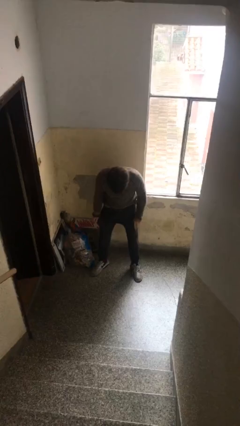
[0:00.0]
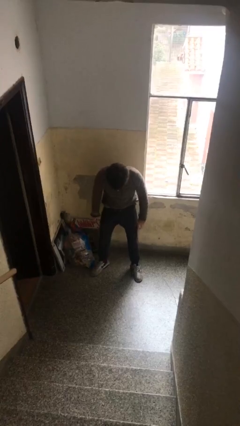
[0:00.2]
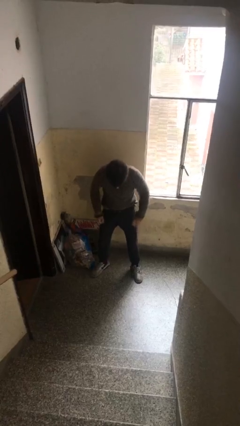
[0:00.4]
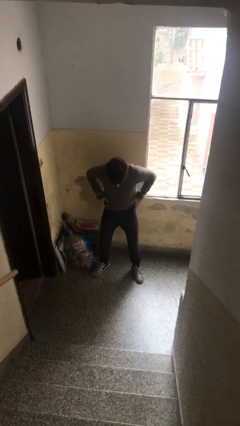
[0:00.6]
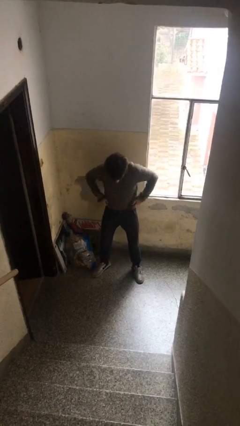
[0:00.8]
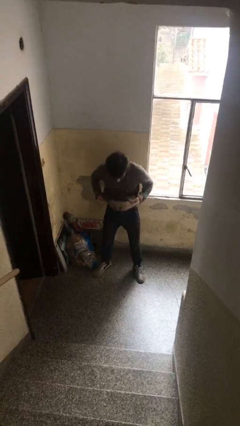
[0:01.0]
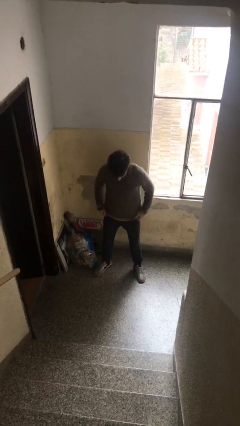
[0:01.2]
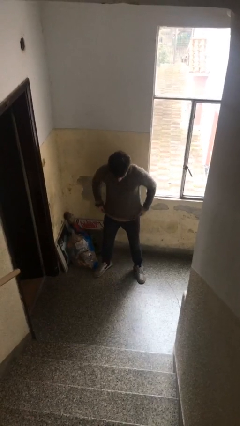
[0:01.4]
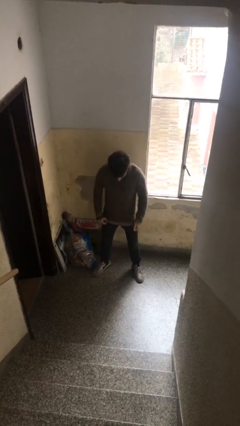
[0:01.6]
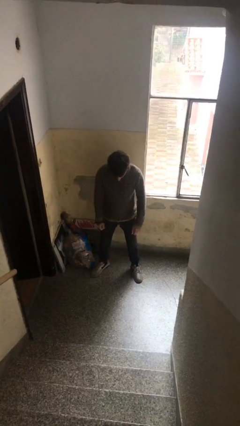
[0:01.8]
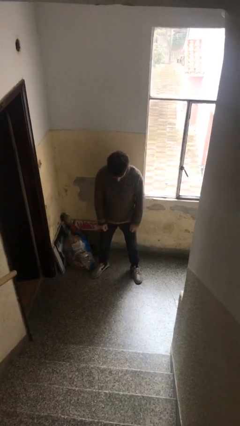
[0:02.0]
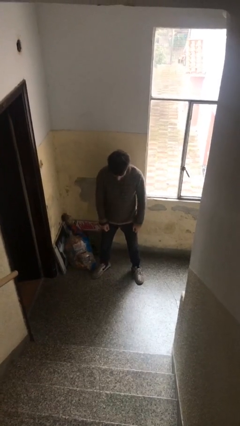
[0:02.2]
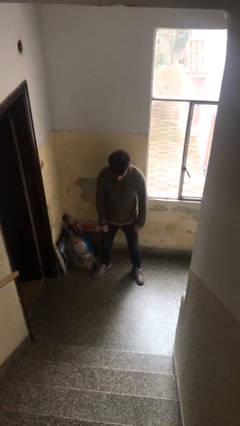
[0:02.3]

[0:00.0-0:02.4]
person untucks shirt

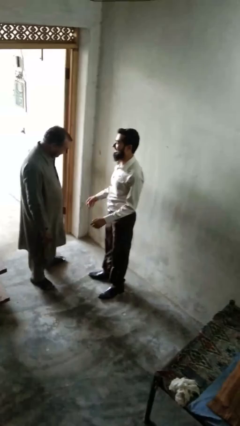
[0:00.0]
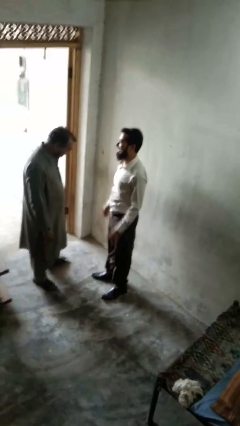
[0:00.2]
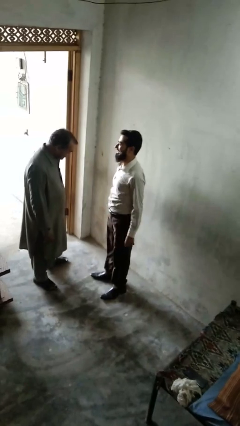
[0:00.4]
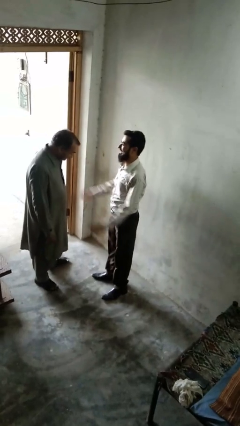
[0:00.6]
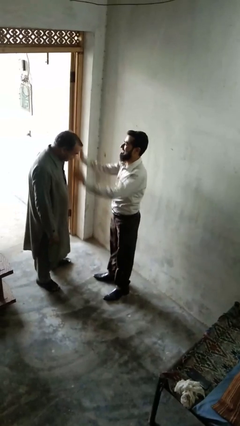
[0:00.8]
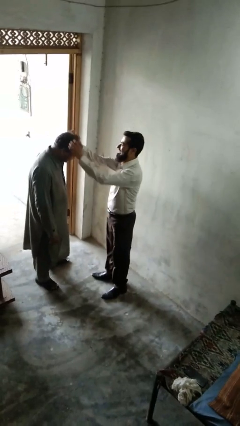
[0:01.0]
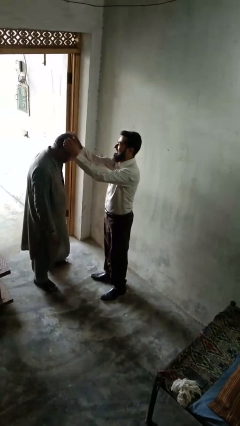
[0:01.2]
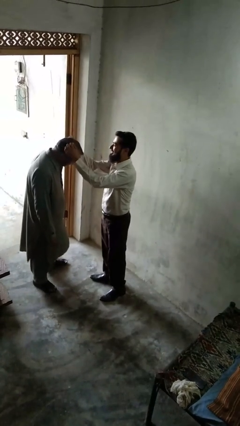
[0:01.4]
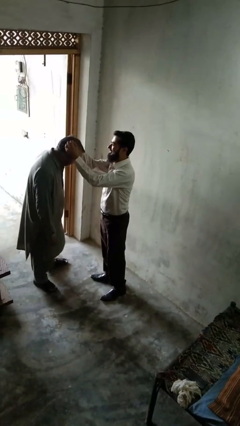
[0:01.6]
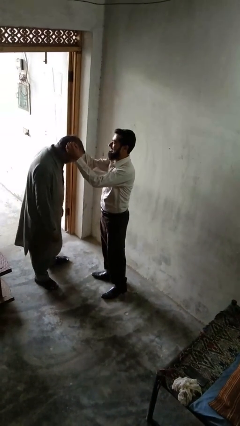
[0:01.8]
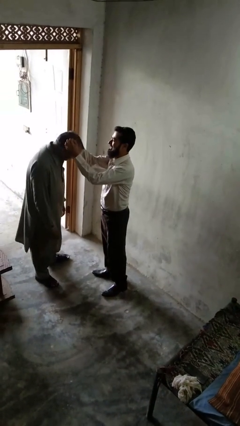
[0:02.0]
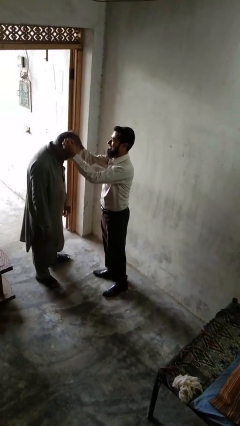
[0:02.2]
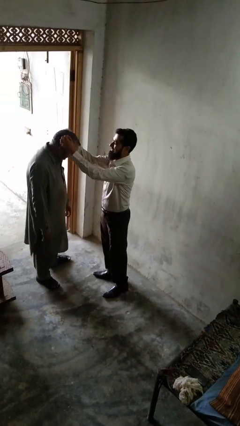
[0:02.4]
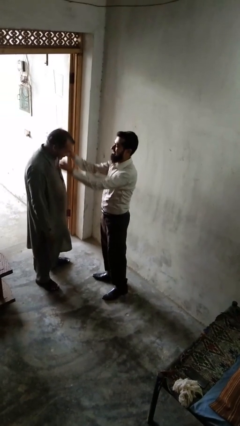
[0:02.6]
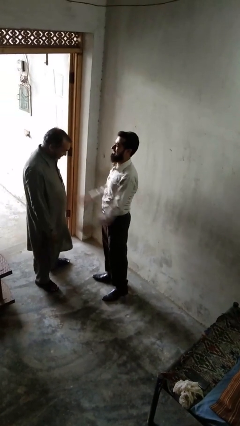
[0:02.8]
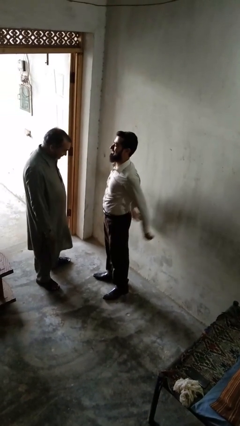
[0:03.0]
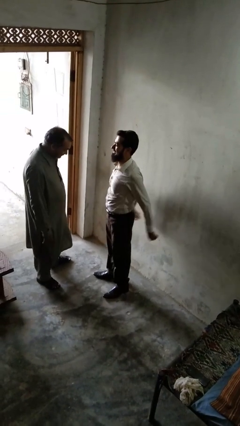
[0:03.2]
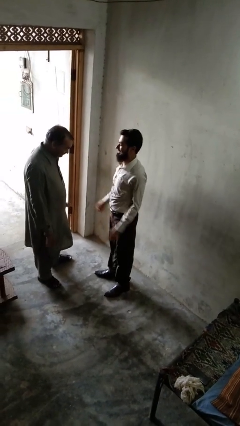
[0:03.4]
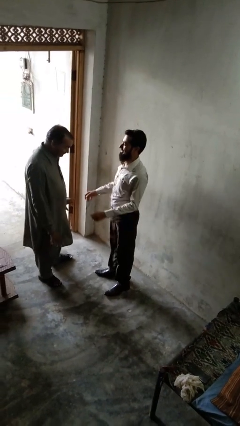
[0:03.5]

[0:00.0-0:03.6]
person grabs person by hair

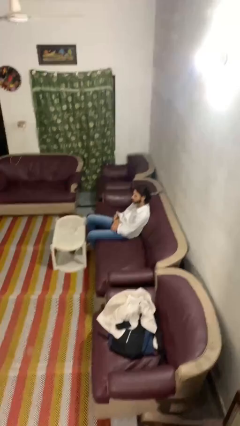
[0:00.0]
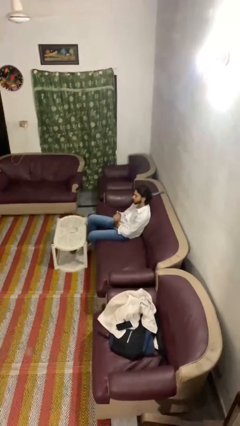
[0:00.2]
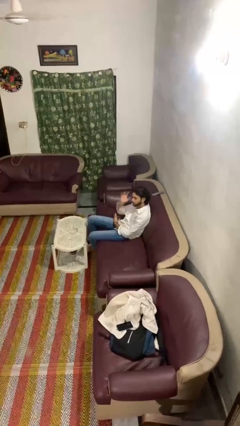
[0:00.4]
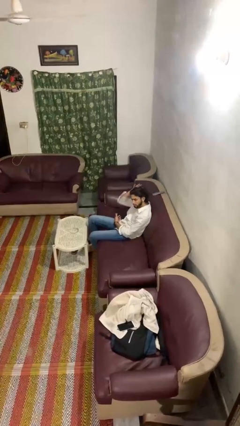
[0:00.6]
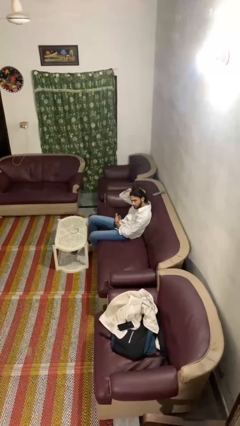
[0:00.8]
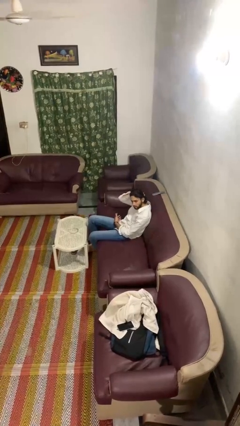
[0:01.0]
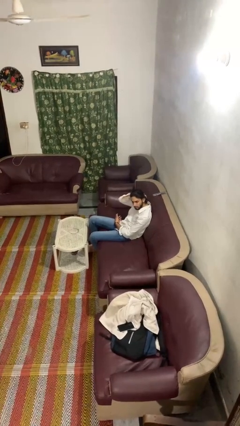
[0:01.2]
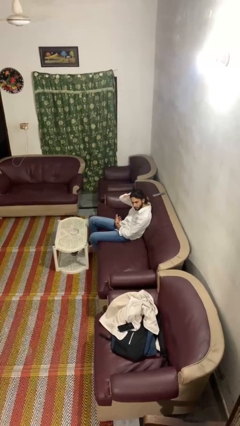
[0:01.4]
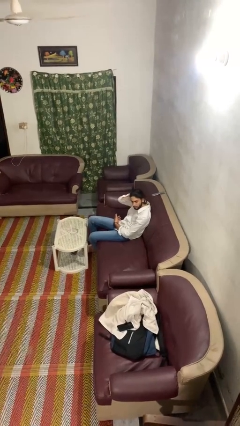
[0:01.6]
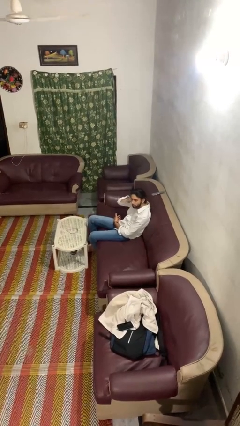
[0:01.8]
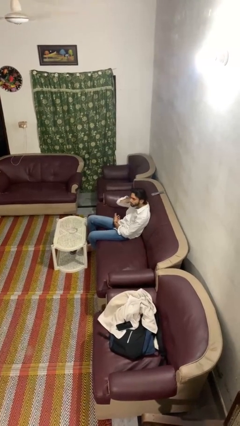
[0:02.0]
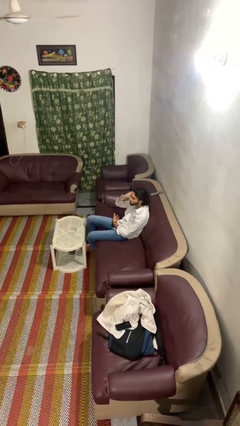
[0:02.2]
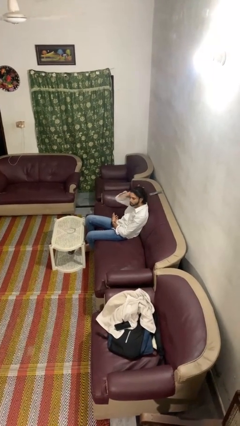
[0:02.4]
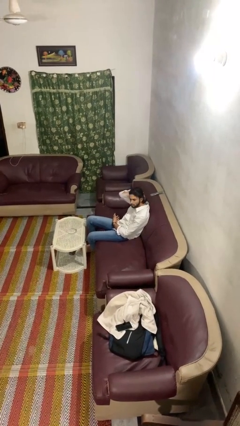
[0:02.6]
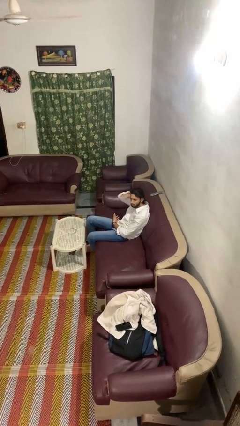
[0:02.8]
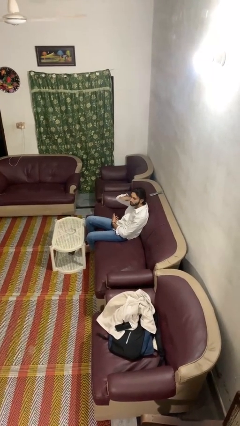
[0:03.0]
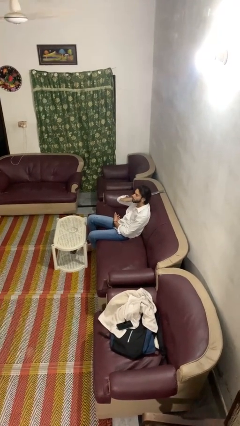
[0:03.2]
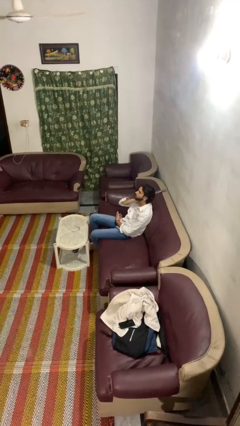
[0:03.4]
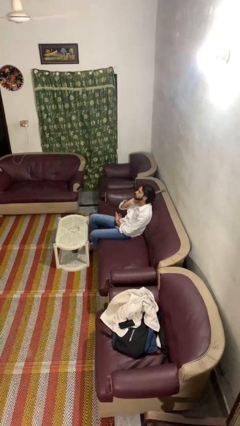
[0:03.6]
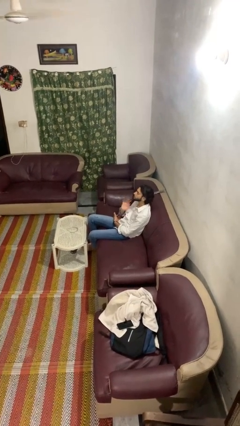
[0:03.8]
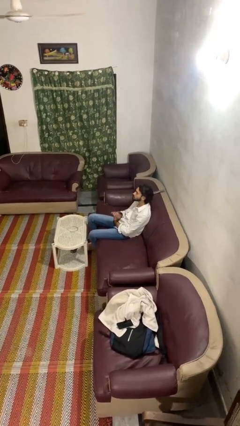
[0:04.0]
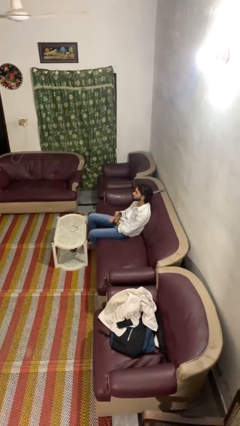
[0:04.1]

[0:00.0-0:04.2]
person strokes hair

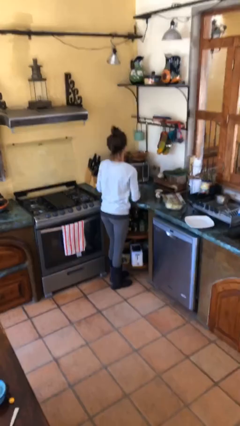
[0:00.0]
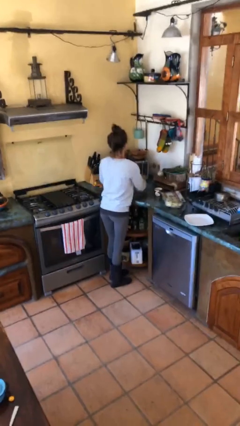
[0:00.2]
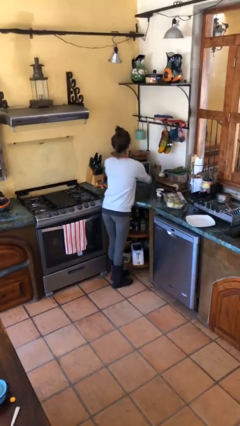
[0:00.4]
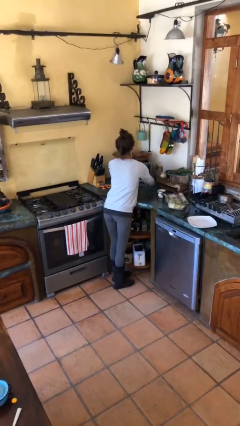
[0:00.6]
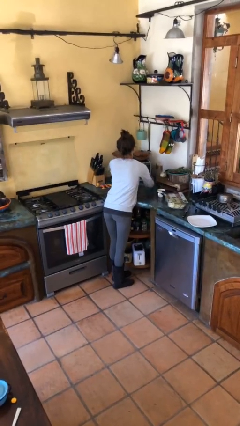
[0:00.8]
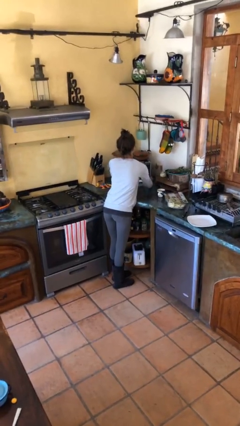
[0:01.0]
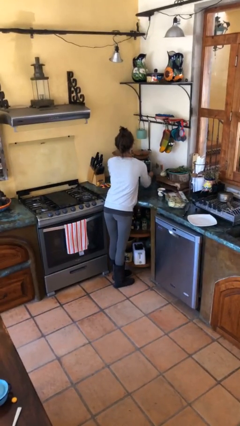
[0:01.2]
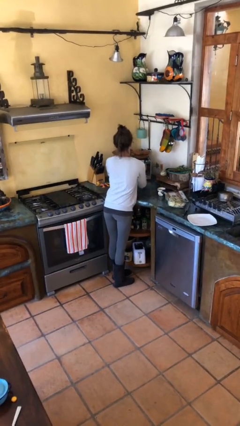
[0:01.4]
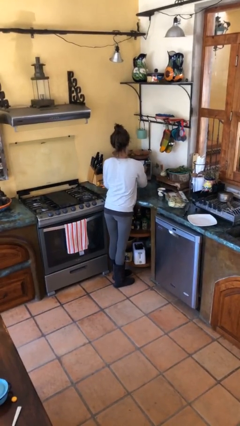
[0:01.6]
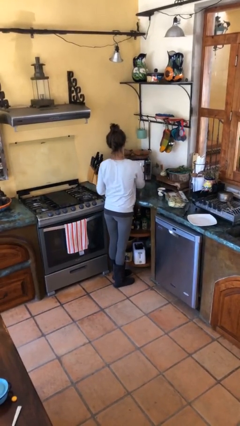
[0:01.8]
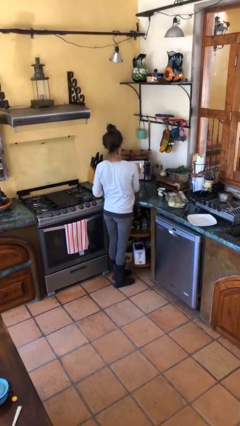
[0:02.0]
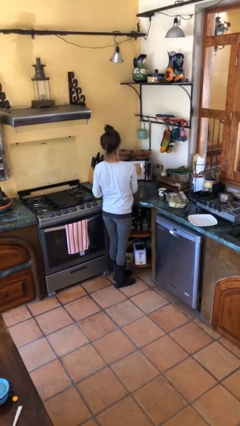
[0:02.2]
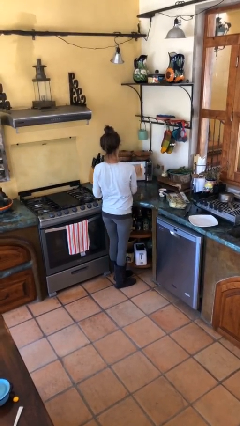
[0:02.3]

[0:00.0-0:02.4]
person opens microwave

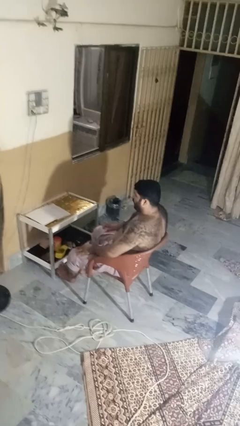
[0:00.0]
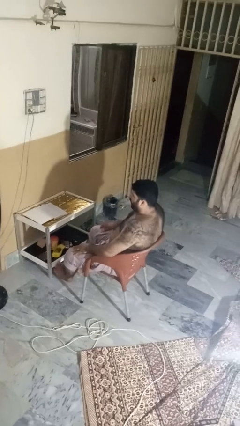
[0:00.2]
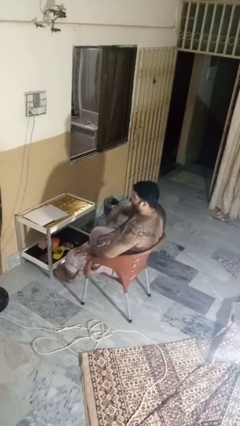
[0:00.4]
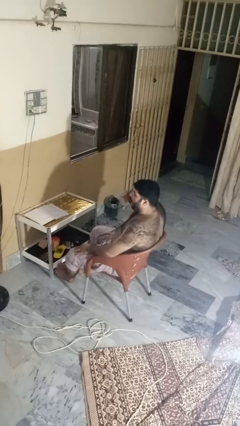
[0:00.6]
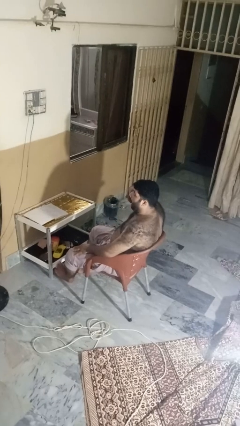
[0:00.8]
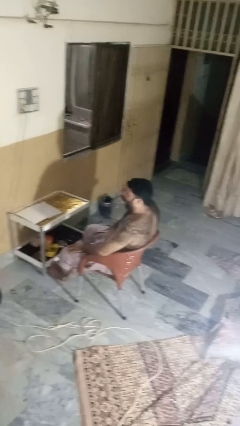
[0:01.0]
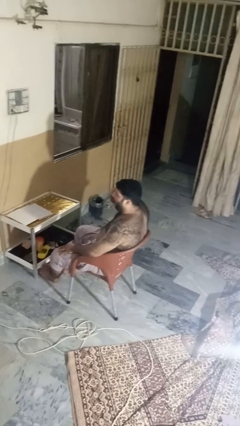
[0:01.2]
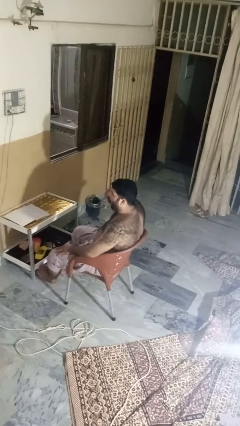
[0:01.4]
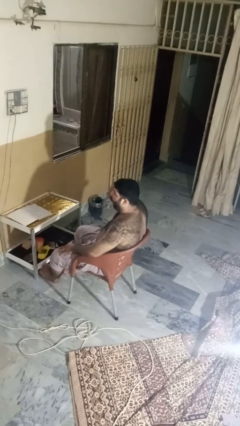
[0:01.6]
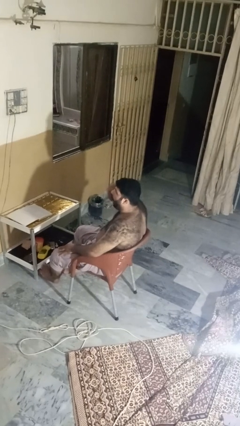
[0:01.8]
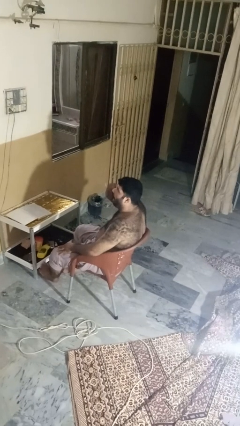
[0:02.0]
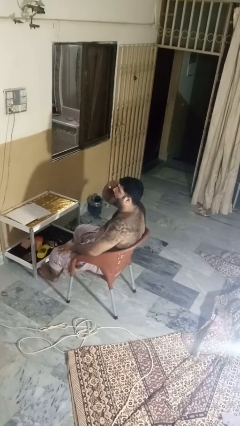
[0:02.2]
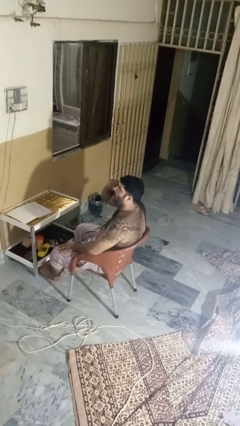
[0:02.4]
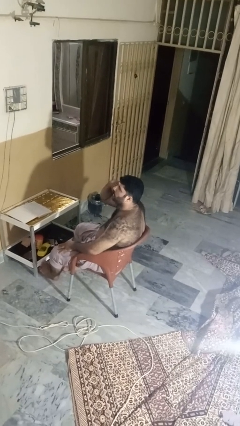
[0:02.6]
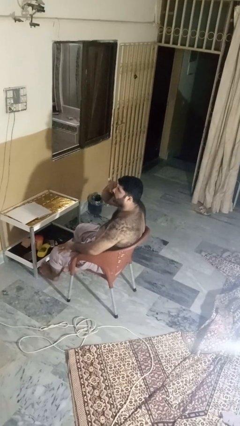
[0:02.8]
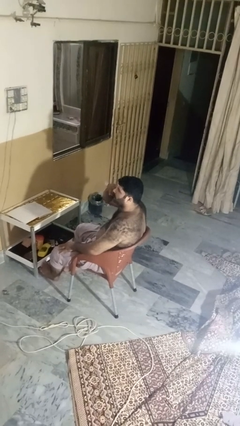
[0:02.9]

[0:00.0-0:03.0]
person rubs eyes

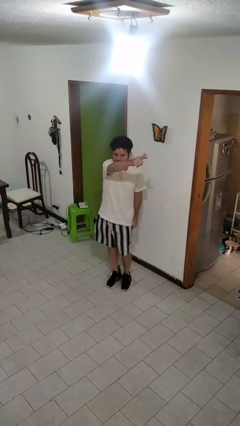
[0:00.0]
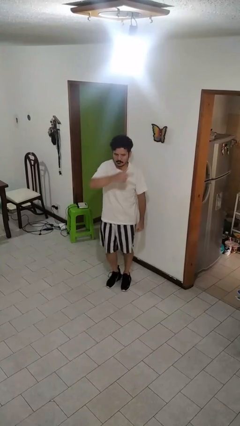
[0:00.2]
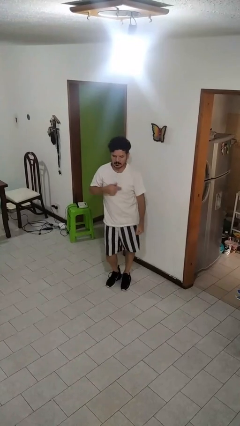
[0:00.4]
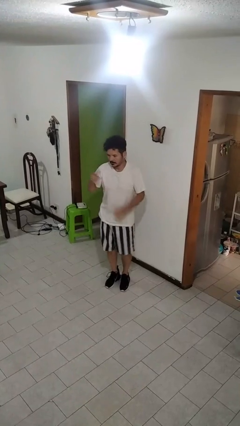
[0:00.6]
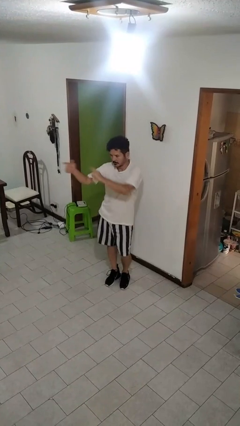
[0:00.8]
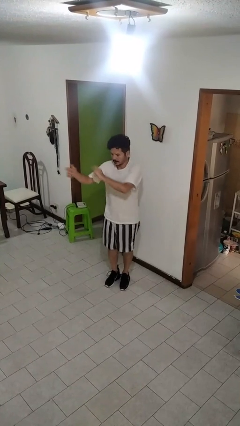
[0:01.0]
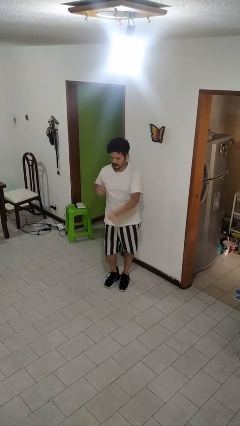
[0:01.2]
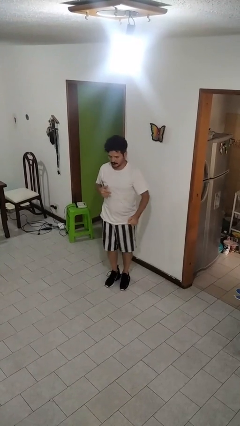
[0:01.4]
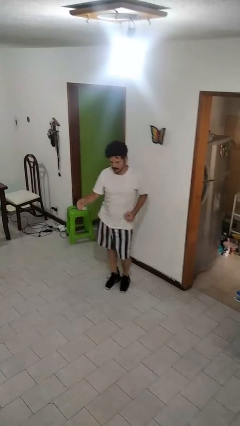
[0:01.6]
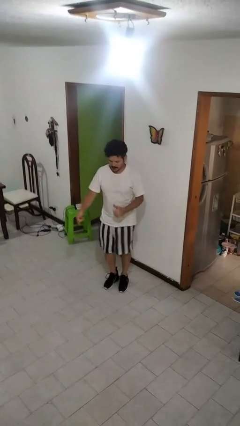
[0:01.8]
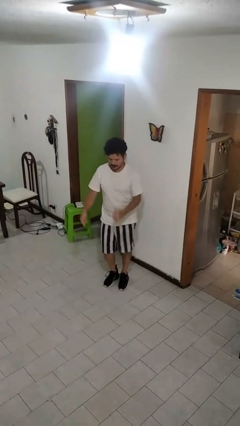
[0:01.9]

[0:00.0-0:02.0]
person dances in place
